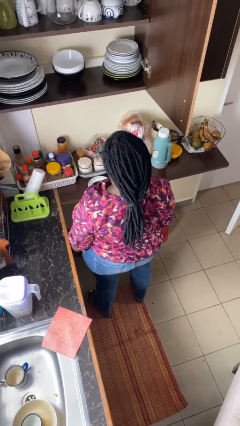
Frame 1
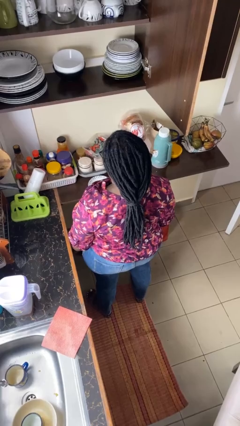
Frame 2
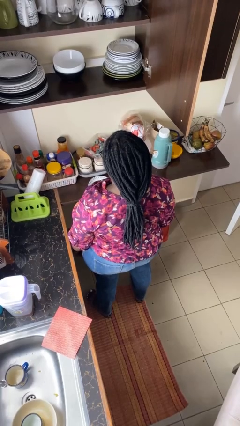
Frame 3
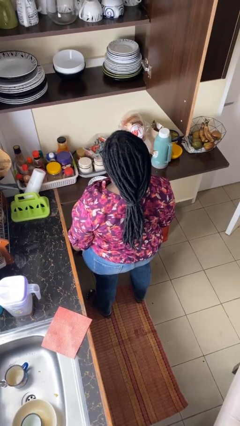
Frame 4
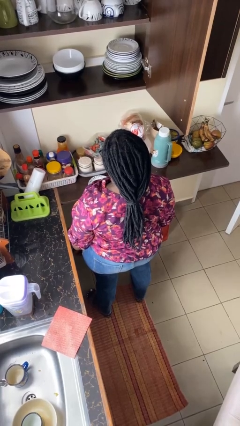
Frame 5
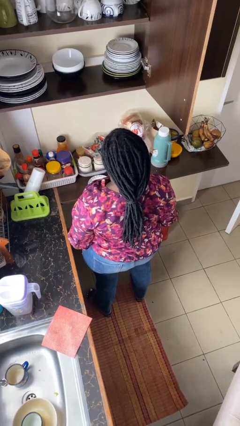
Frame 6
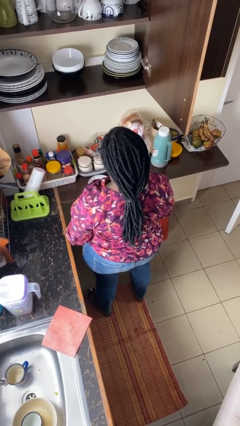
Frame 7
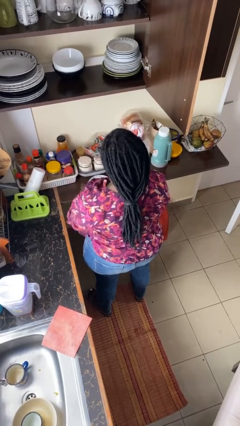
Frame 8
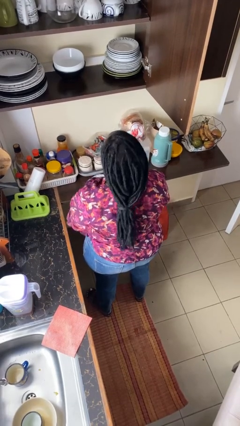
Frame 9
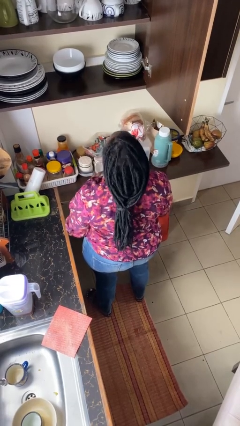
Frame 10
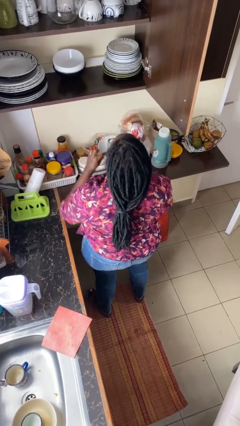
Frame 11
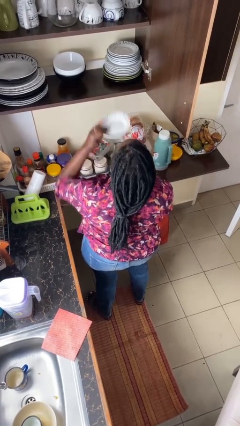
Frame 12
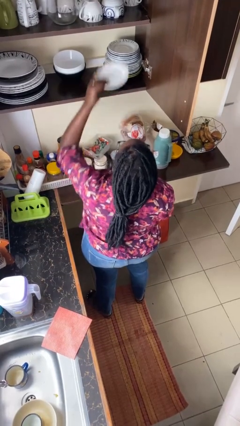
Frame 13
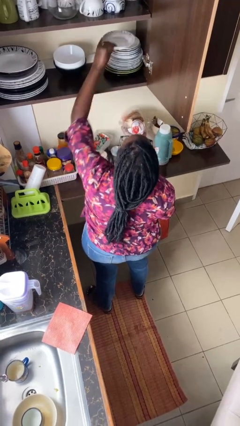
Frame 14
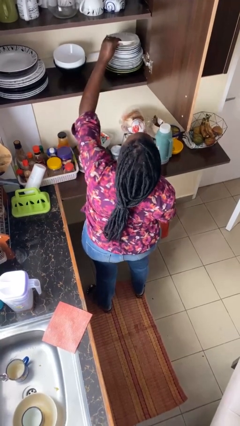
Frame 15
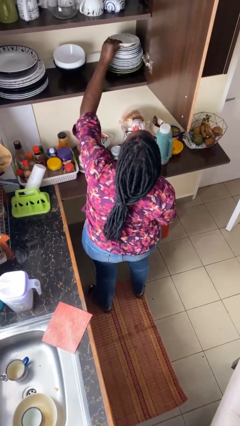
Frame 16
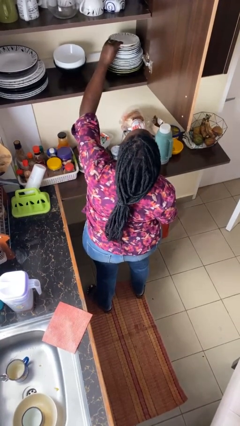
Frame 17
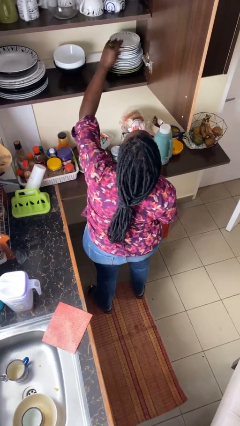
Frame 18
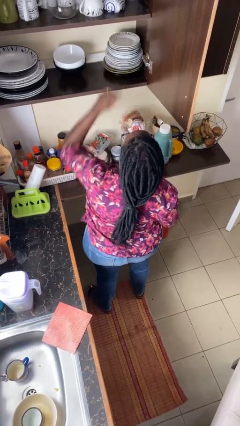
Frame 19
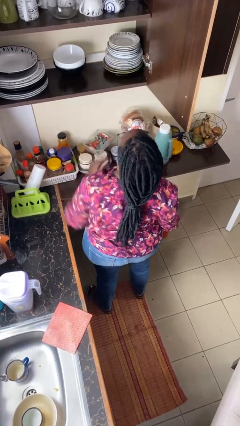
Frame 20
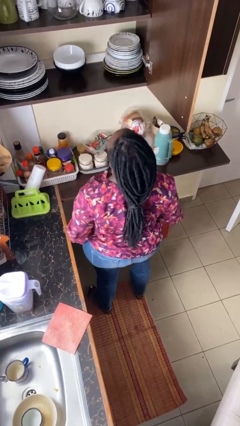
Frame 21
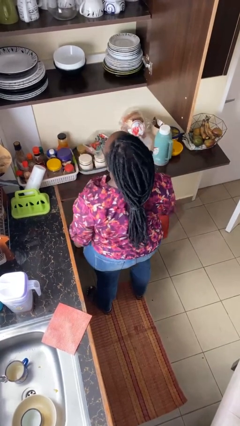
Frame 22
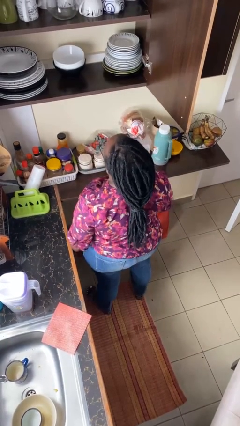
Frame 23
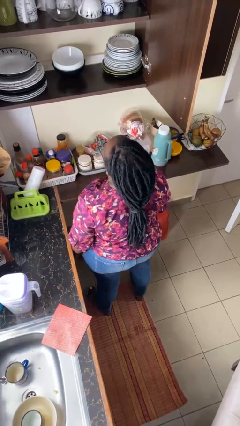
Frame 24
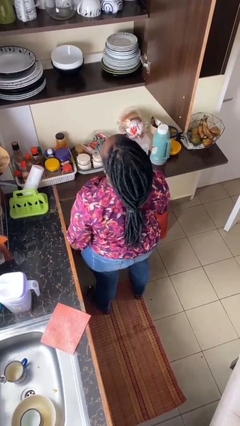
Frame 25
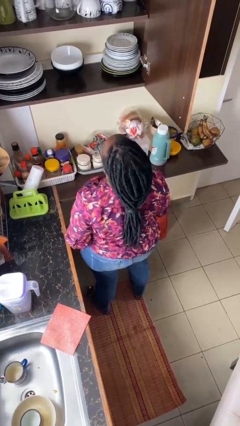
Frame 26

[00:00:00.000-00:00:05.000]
person puts object in cabinet

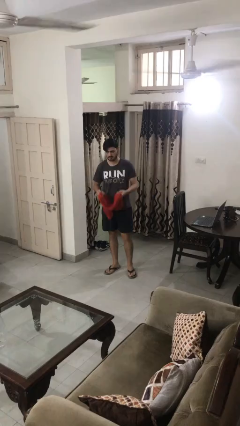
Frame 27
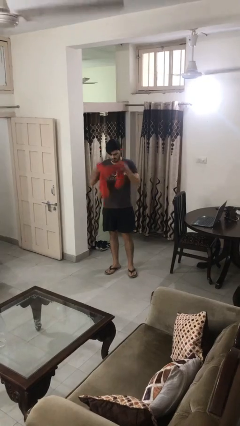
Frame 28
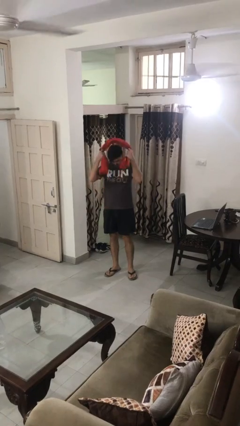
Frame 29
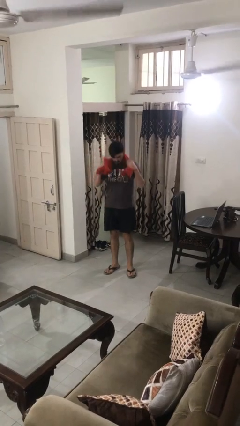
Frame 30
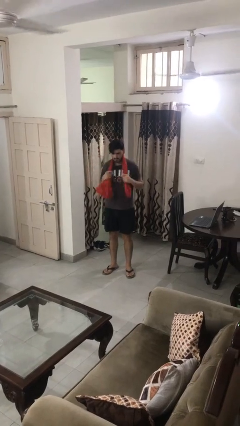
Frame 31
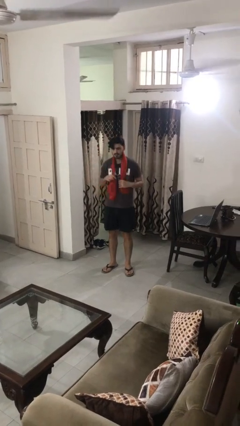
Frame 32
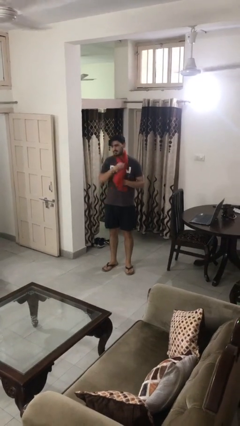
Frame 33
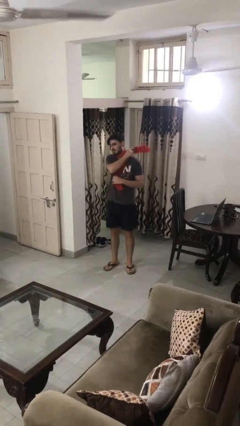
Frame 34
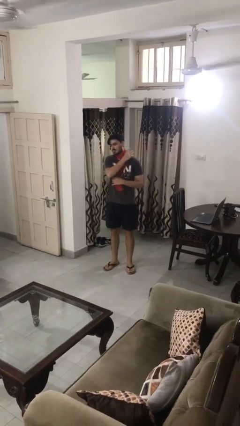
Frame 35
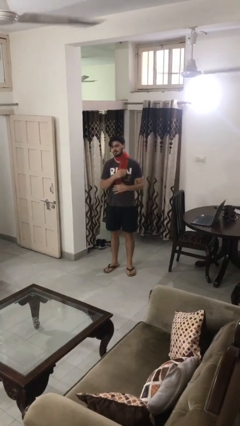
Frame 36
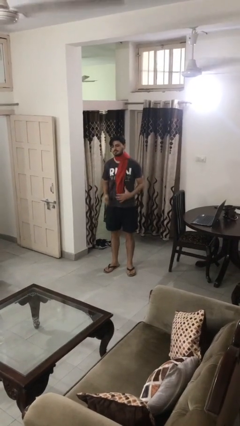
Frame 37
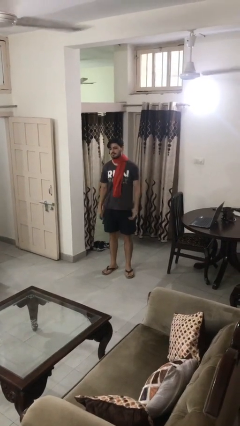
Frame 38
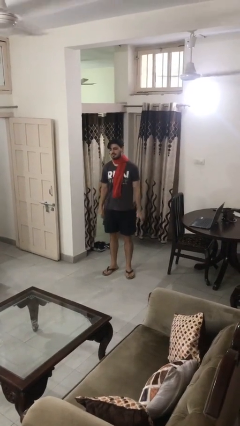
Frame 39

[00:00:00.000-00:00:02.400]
person puts on scarf

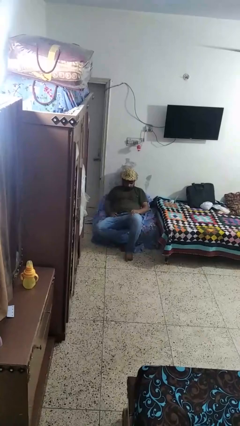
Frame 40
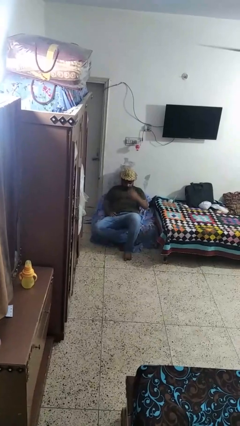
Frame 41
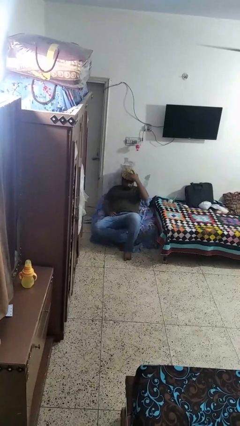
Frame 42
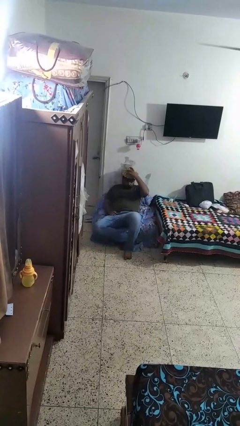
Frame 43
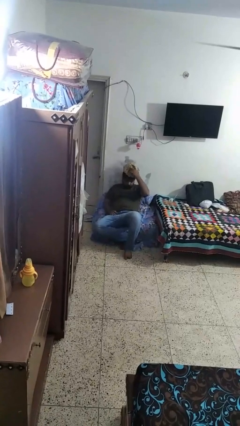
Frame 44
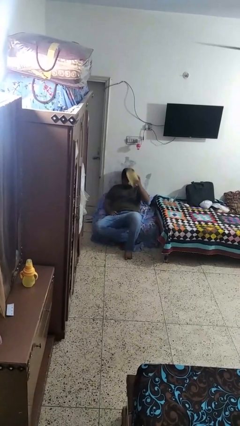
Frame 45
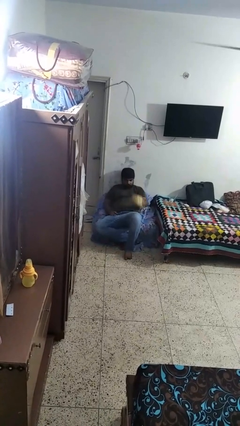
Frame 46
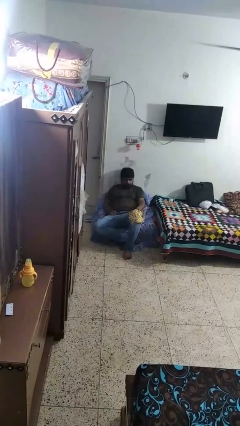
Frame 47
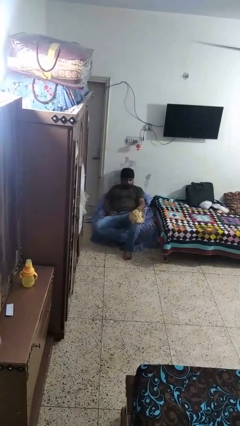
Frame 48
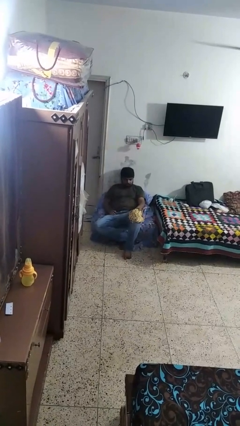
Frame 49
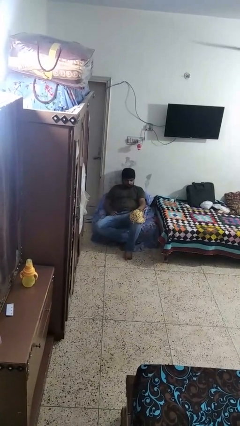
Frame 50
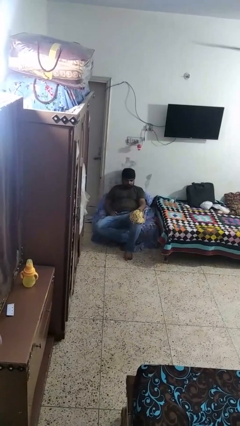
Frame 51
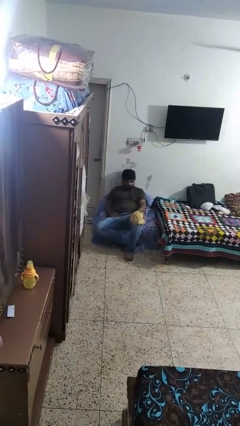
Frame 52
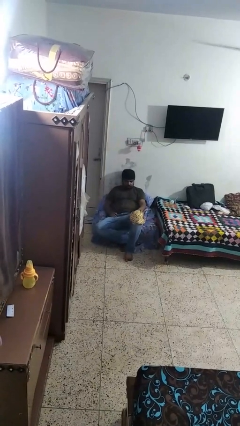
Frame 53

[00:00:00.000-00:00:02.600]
person takes off hat

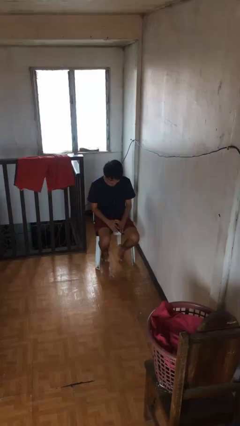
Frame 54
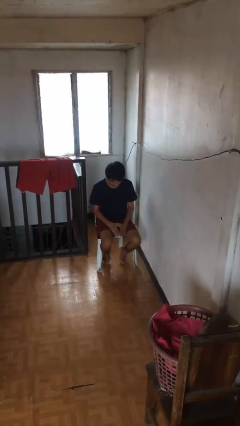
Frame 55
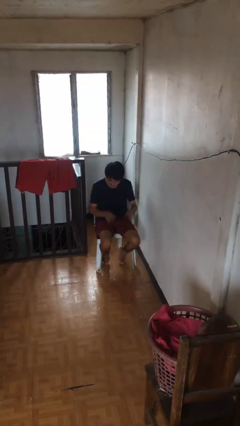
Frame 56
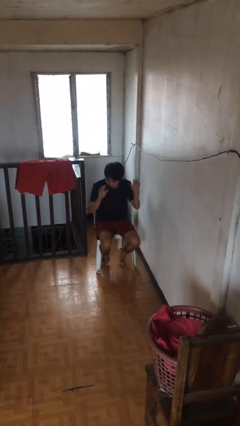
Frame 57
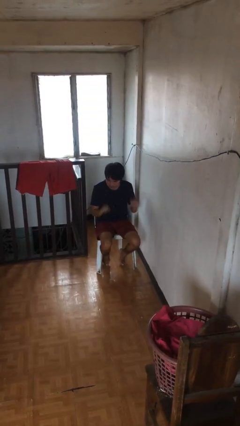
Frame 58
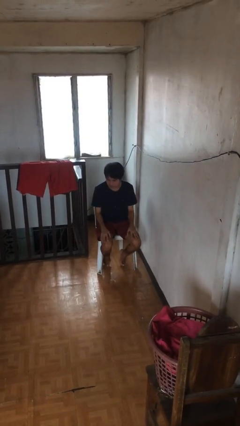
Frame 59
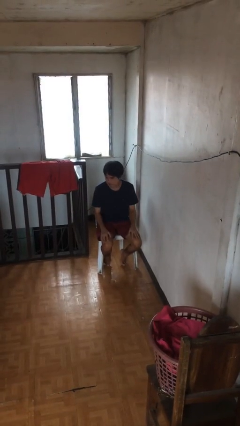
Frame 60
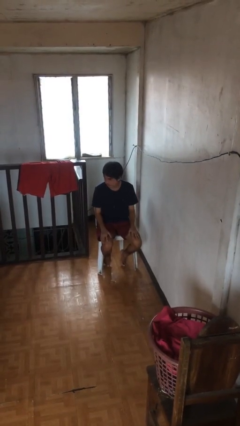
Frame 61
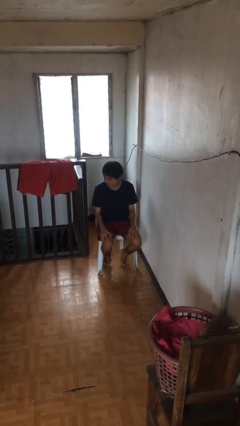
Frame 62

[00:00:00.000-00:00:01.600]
person slaps hands on thighs

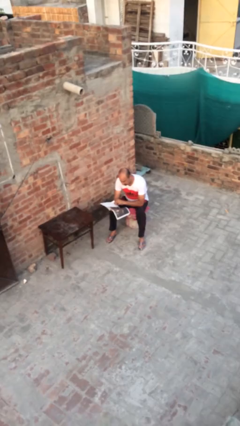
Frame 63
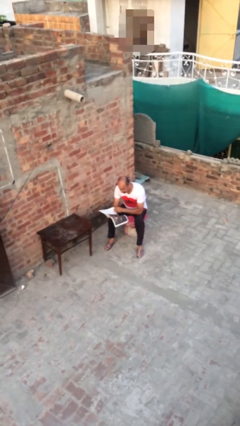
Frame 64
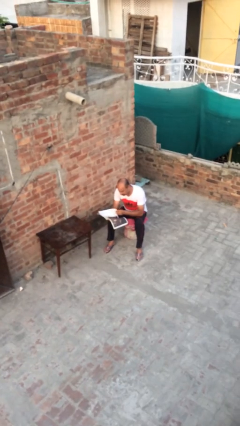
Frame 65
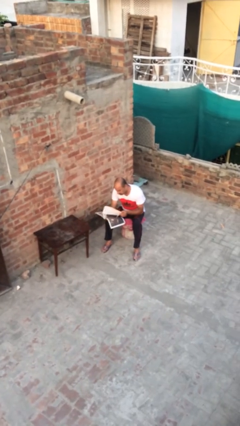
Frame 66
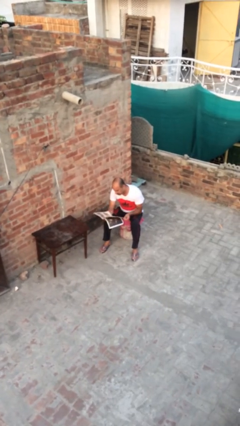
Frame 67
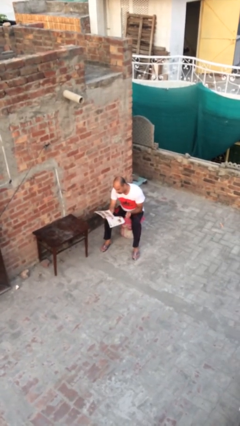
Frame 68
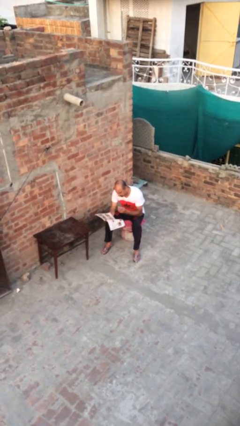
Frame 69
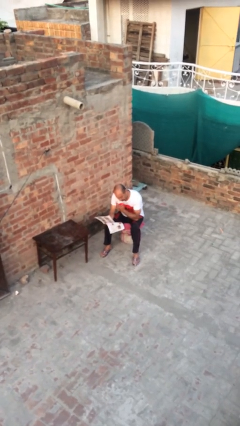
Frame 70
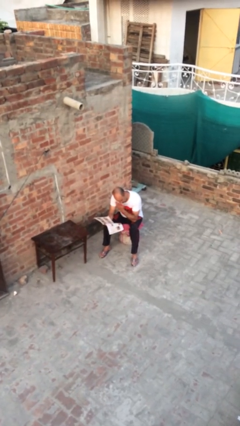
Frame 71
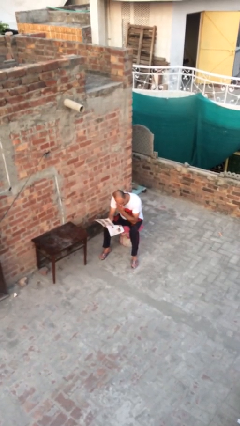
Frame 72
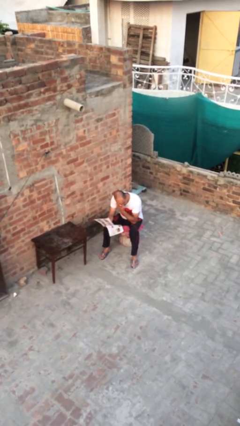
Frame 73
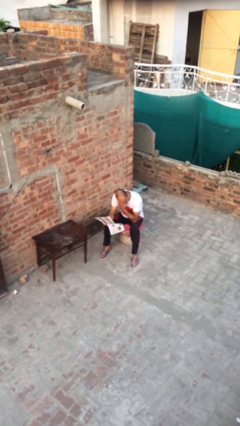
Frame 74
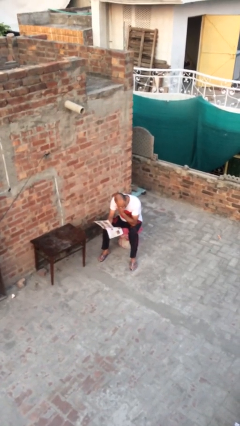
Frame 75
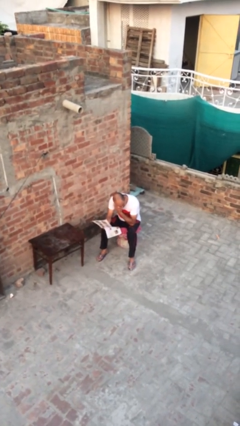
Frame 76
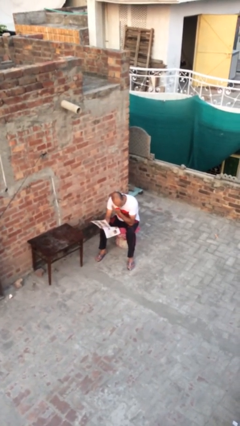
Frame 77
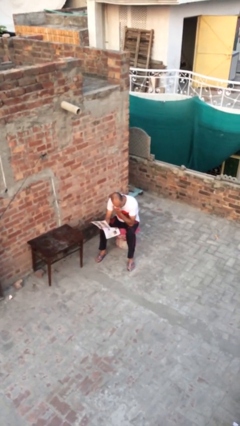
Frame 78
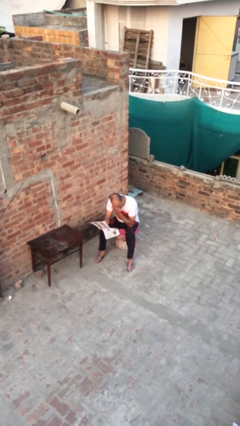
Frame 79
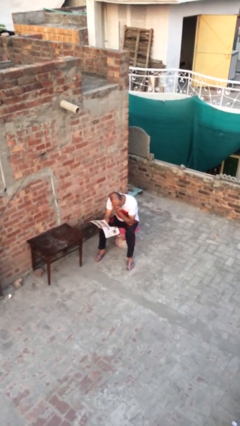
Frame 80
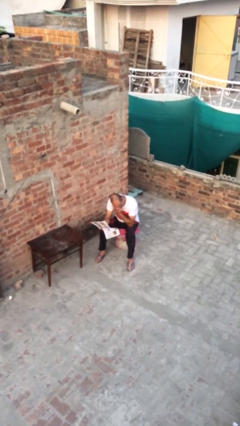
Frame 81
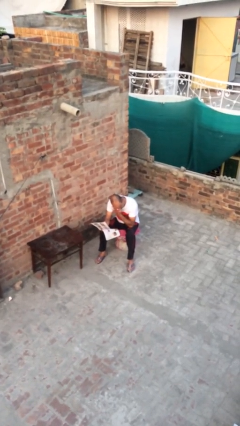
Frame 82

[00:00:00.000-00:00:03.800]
person reads document

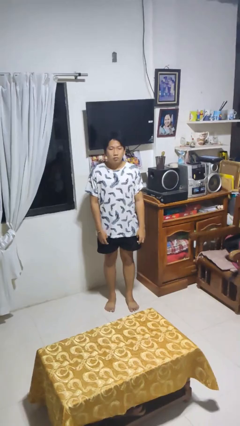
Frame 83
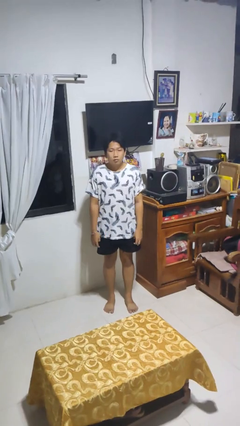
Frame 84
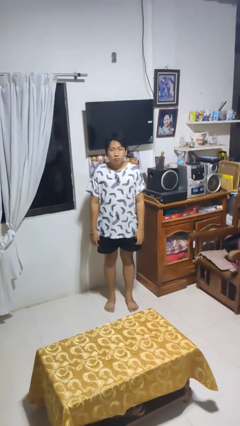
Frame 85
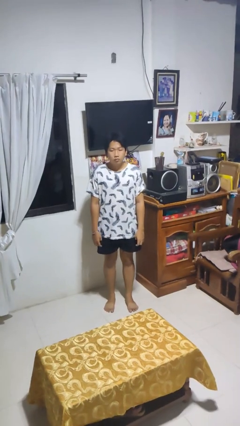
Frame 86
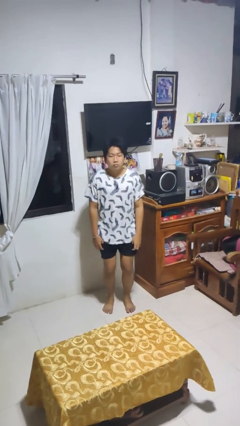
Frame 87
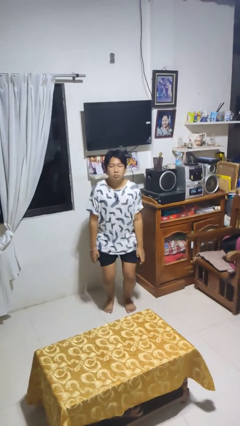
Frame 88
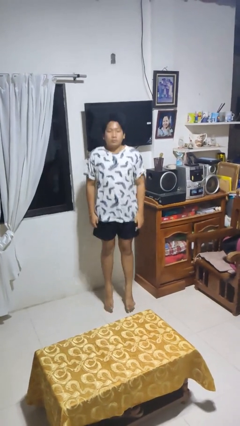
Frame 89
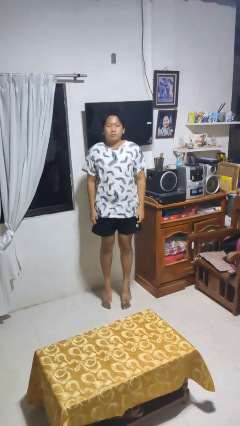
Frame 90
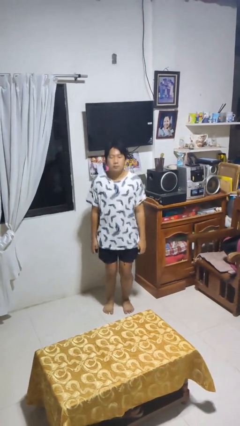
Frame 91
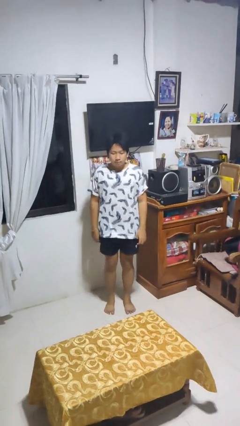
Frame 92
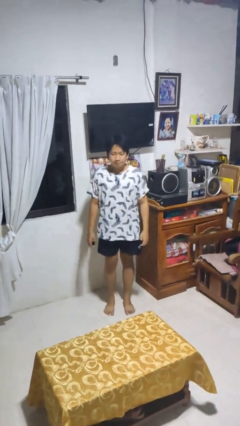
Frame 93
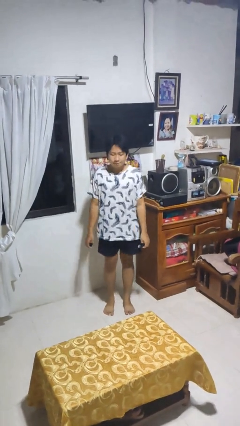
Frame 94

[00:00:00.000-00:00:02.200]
person jumps

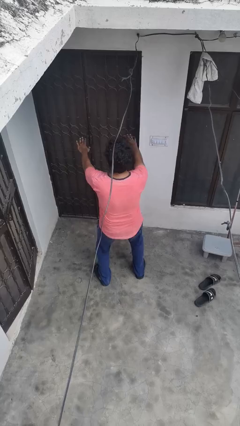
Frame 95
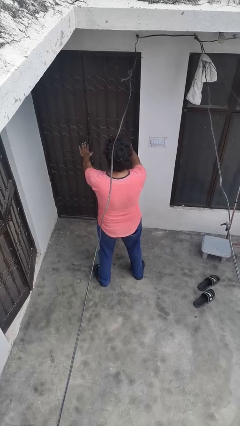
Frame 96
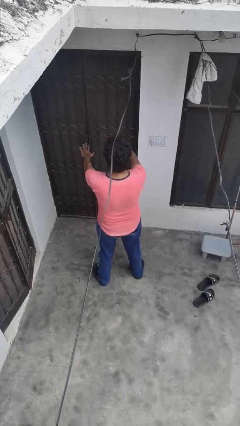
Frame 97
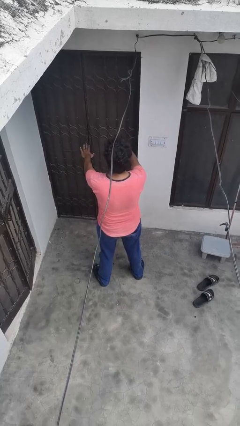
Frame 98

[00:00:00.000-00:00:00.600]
person stands up
